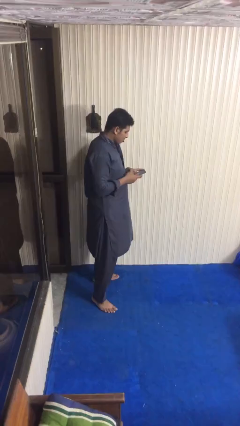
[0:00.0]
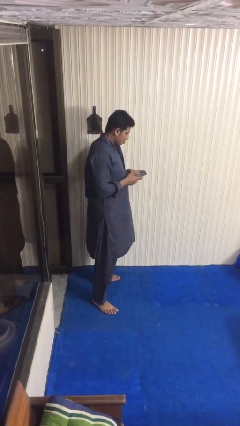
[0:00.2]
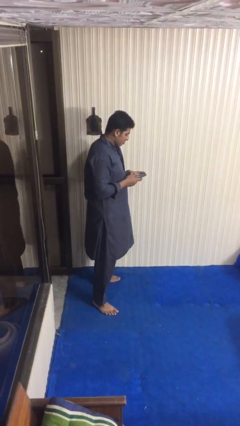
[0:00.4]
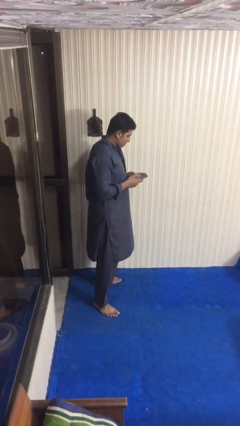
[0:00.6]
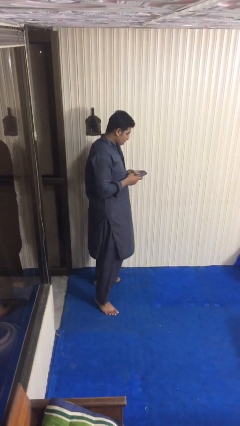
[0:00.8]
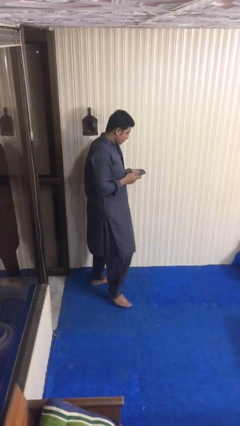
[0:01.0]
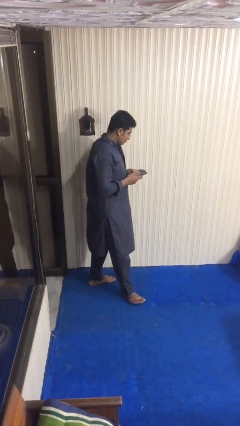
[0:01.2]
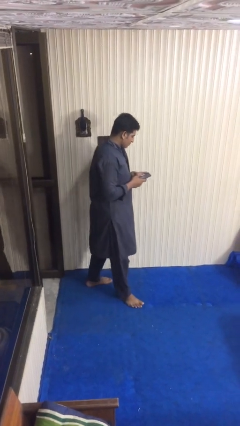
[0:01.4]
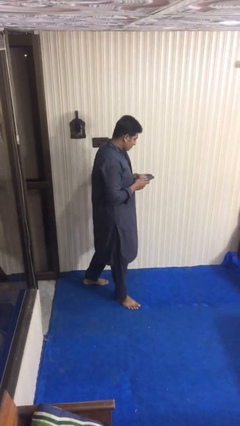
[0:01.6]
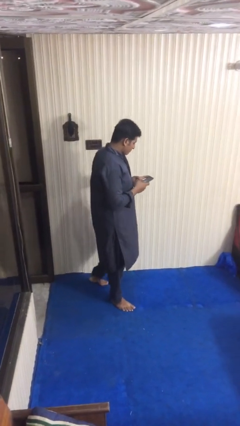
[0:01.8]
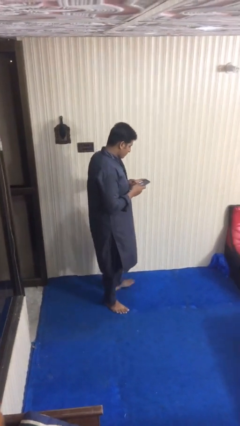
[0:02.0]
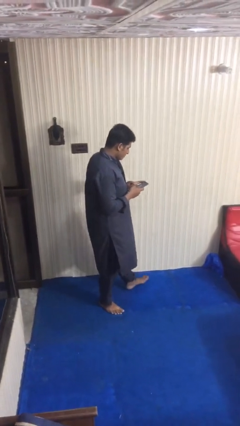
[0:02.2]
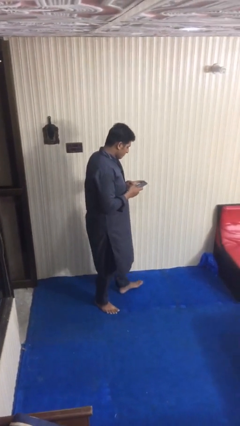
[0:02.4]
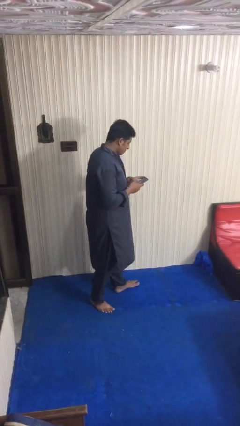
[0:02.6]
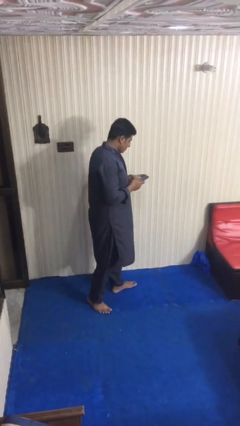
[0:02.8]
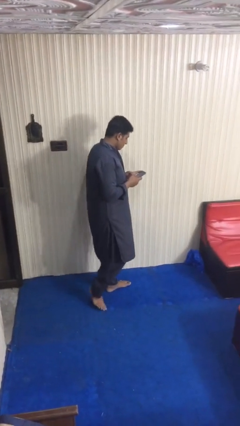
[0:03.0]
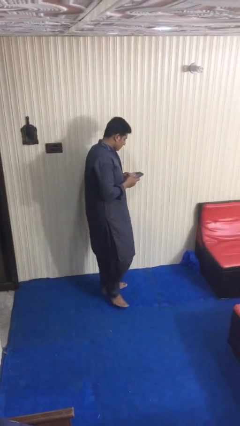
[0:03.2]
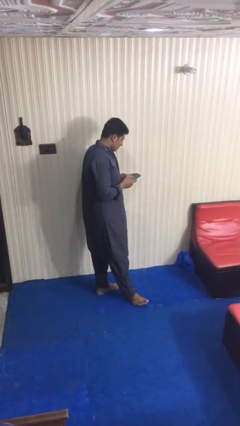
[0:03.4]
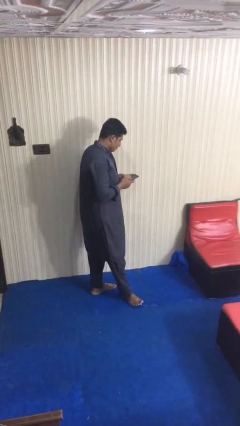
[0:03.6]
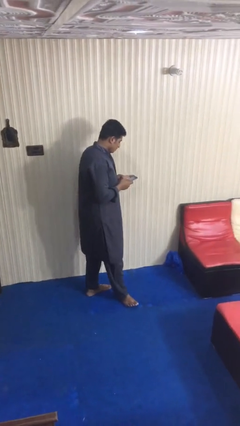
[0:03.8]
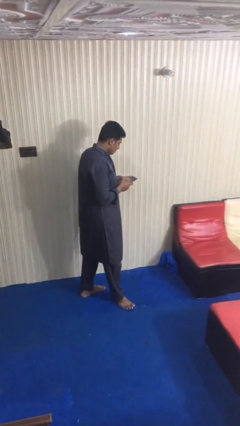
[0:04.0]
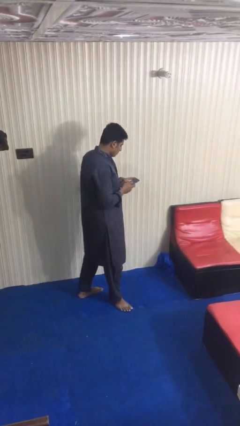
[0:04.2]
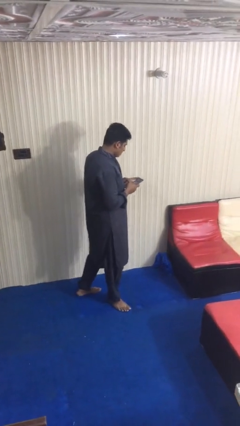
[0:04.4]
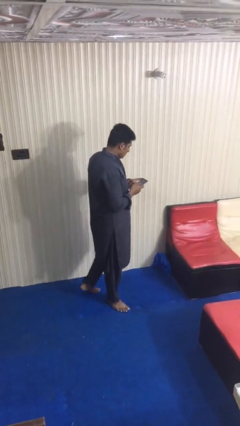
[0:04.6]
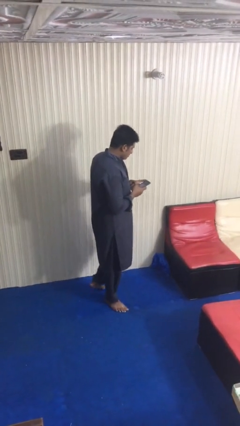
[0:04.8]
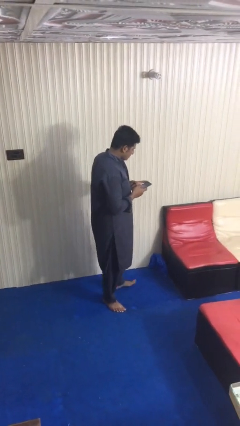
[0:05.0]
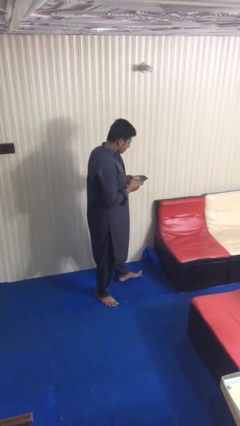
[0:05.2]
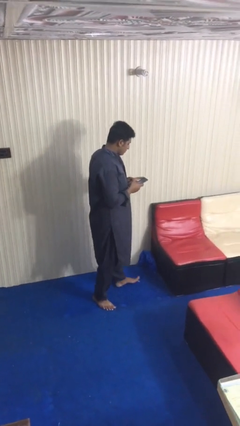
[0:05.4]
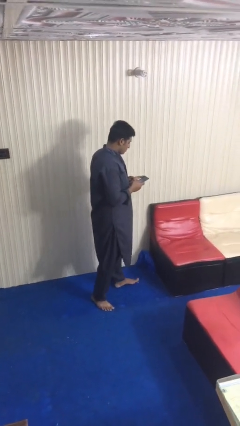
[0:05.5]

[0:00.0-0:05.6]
person texts on phone

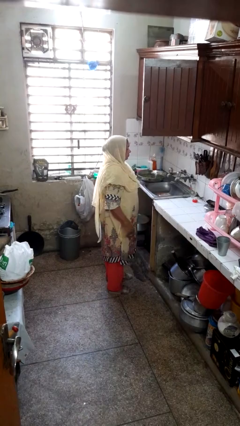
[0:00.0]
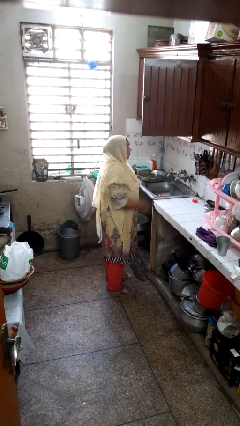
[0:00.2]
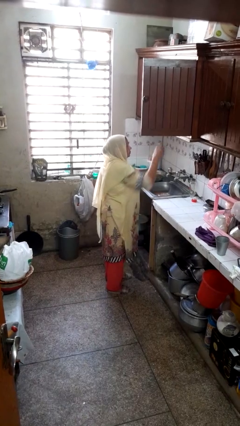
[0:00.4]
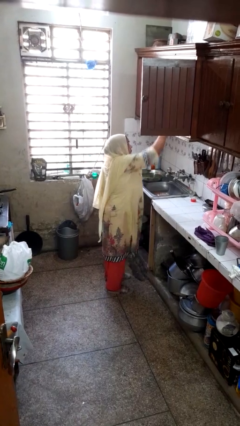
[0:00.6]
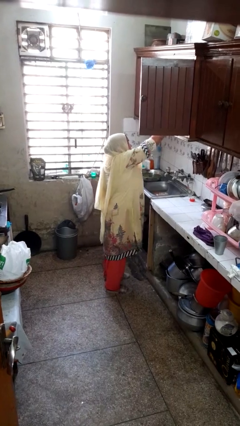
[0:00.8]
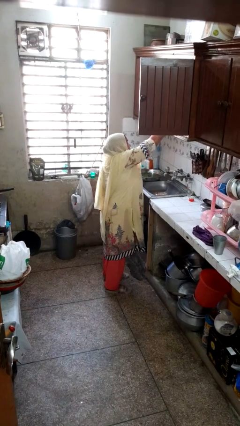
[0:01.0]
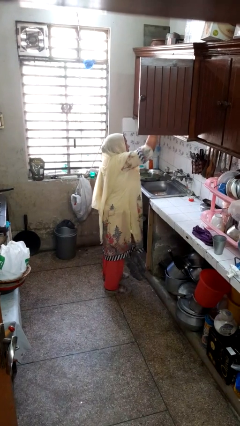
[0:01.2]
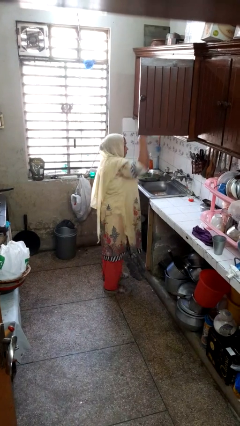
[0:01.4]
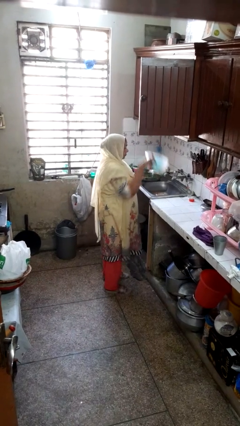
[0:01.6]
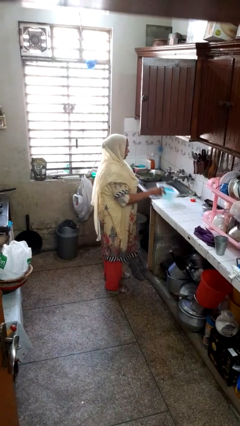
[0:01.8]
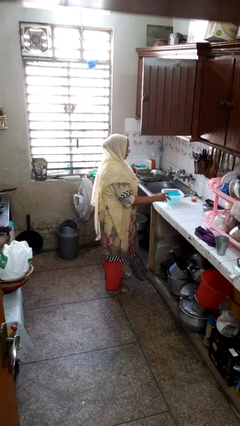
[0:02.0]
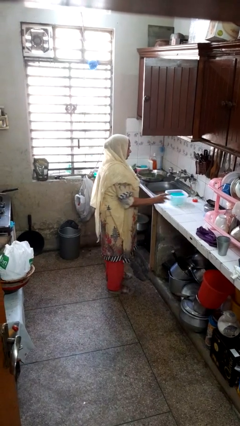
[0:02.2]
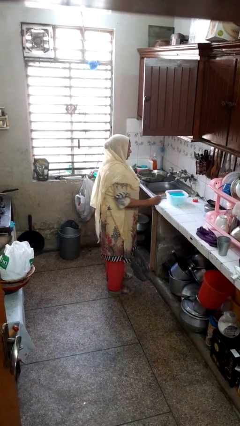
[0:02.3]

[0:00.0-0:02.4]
person takes object from cabinet

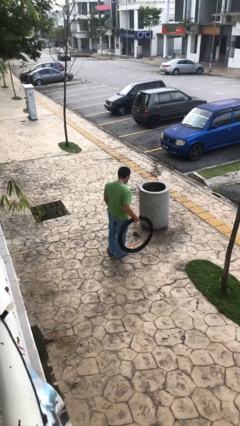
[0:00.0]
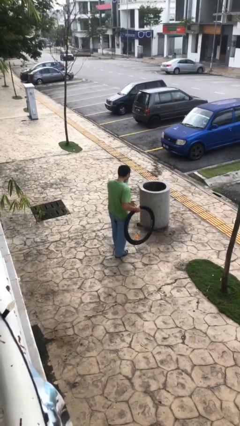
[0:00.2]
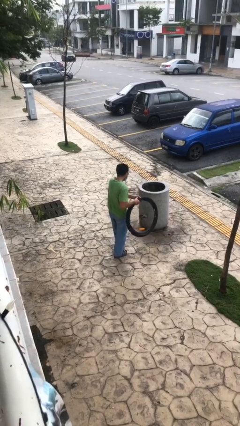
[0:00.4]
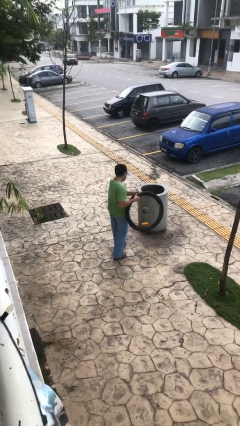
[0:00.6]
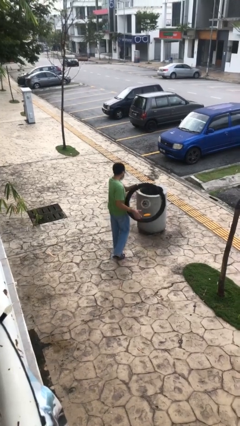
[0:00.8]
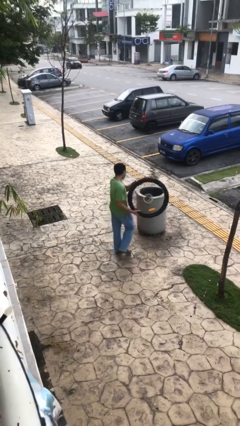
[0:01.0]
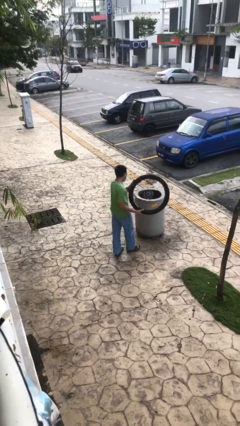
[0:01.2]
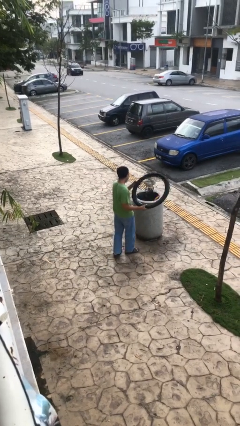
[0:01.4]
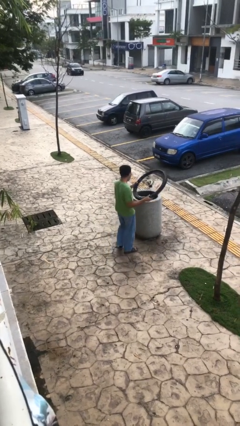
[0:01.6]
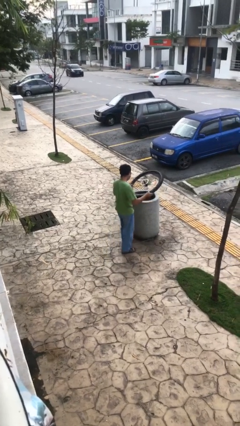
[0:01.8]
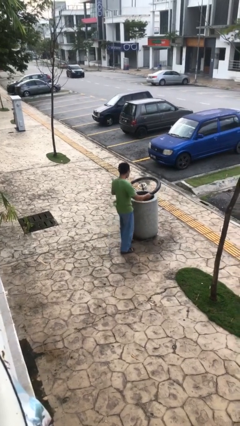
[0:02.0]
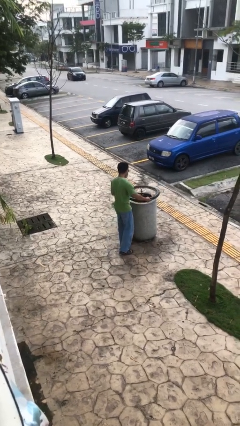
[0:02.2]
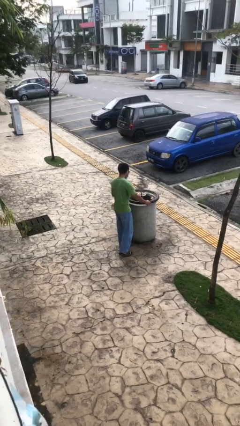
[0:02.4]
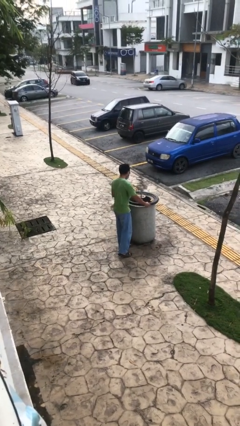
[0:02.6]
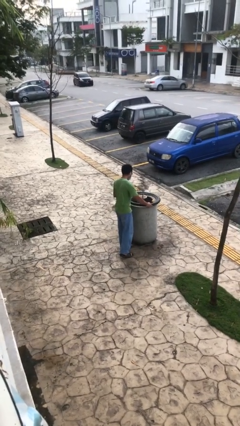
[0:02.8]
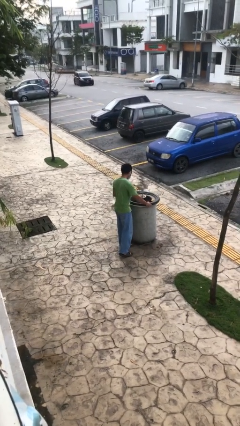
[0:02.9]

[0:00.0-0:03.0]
person puts down object on table

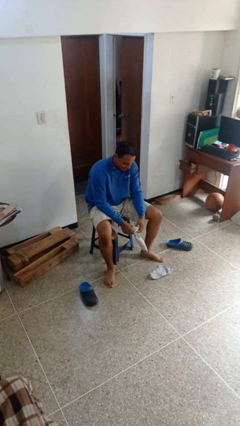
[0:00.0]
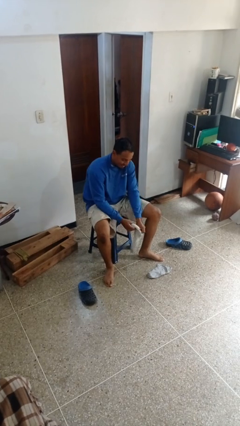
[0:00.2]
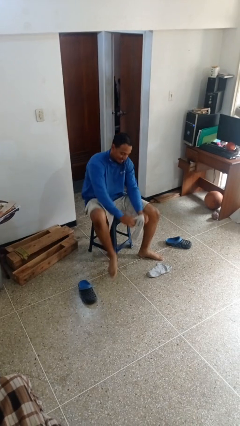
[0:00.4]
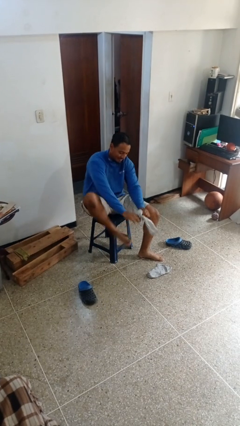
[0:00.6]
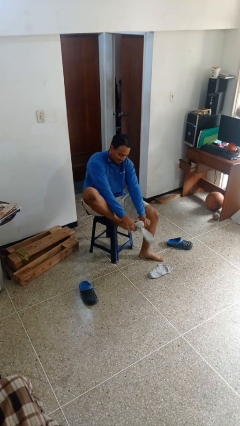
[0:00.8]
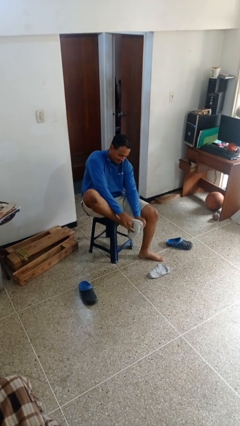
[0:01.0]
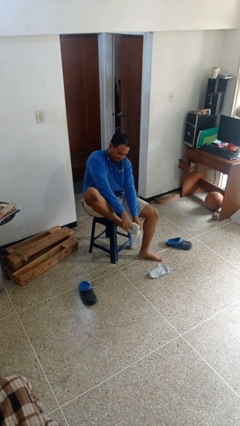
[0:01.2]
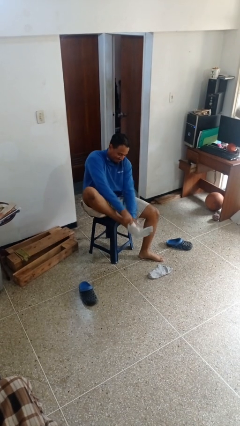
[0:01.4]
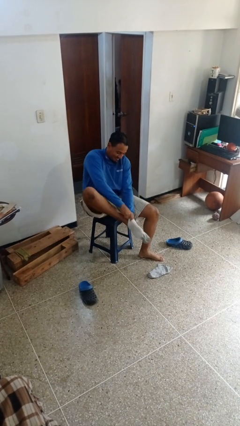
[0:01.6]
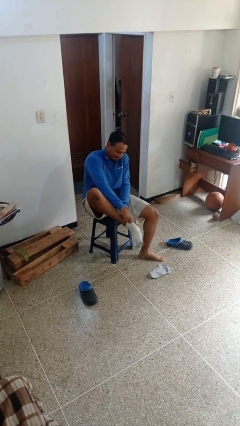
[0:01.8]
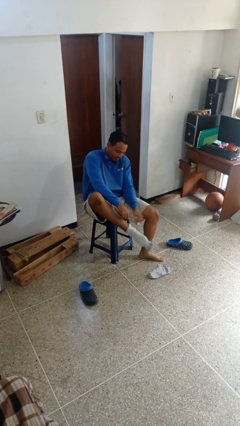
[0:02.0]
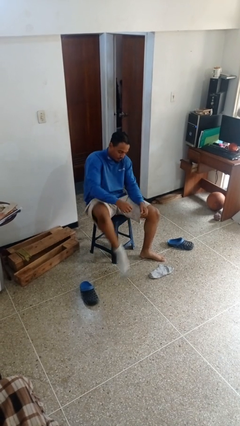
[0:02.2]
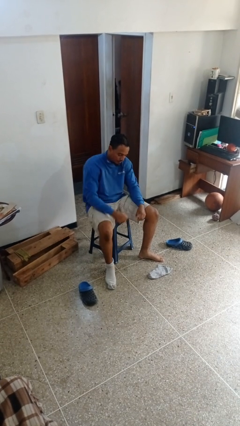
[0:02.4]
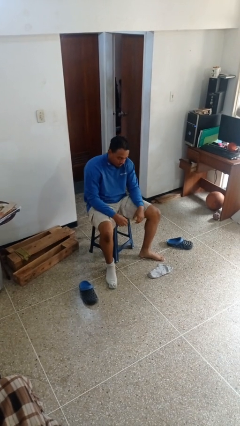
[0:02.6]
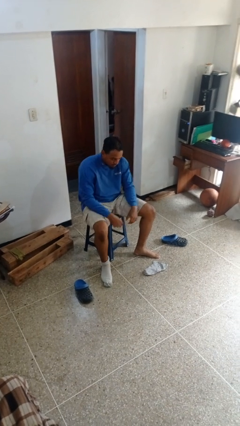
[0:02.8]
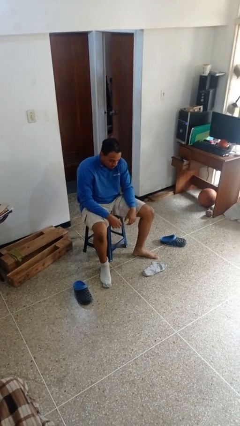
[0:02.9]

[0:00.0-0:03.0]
person puts on socks

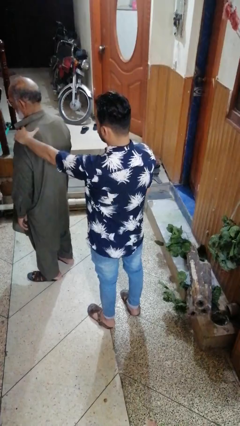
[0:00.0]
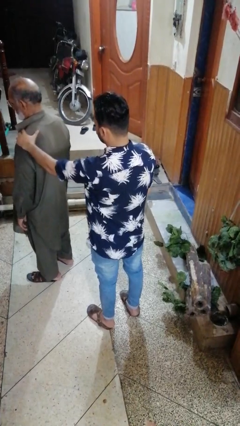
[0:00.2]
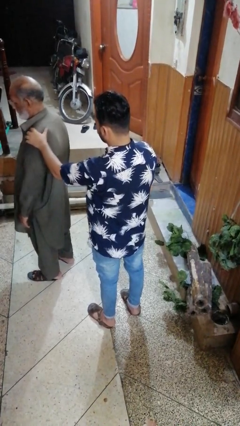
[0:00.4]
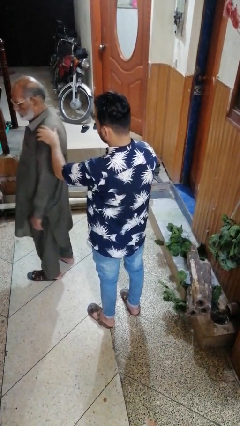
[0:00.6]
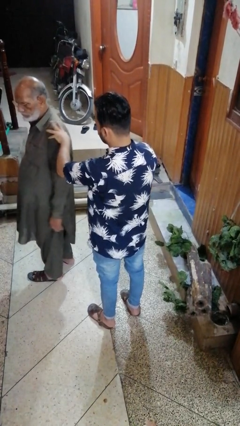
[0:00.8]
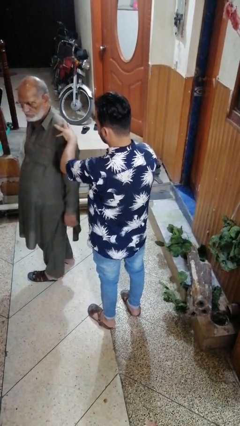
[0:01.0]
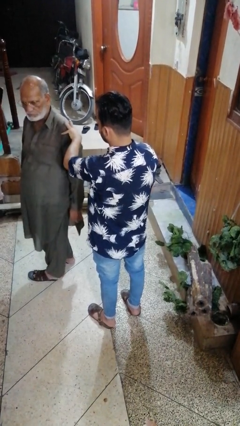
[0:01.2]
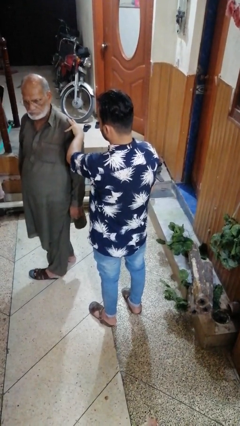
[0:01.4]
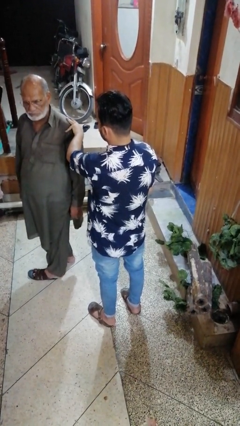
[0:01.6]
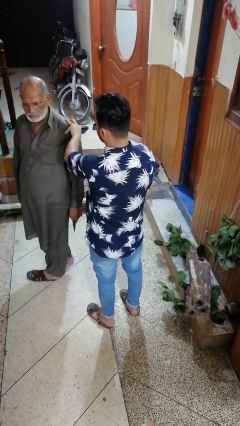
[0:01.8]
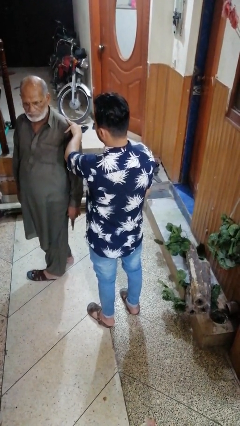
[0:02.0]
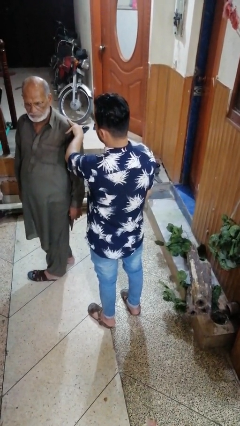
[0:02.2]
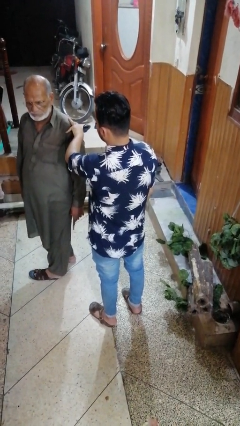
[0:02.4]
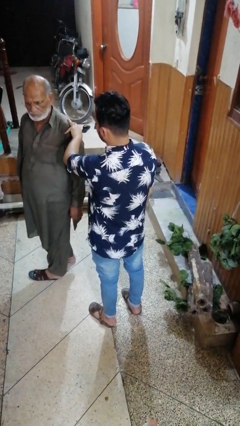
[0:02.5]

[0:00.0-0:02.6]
person spins person around

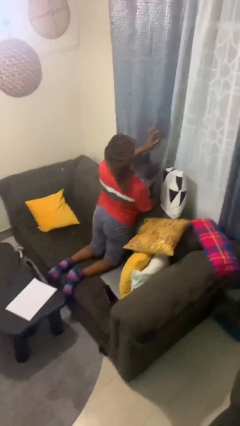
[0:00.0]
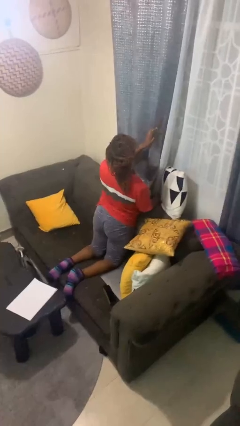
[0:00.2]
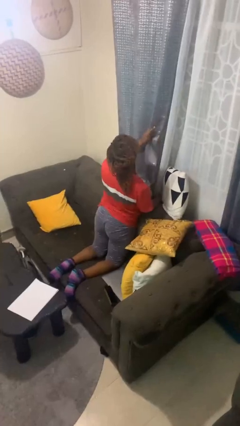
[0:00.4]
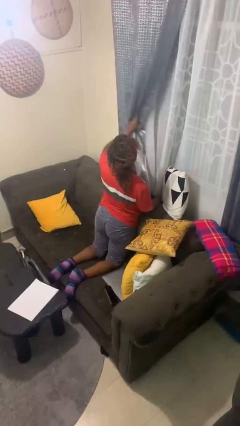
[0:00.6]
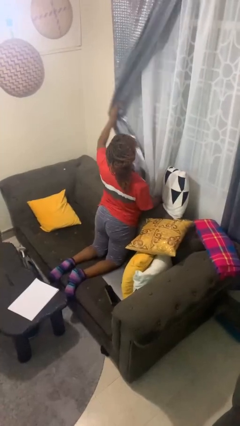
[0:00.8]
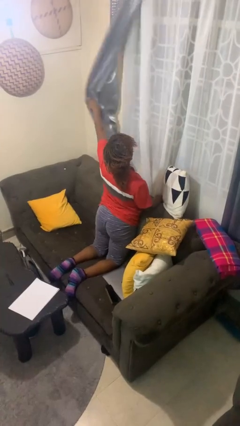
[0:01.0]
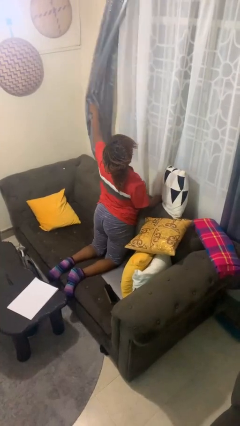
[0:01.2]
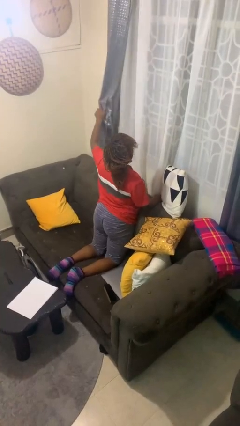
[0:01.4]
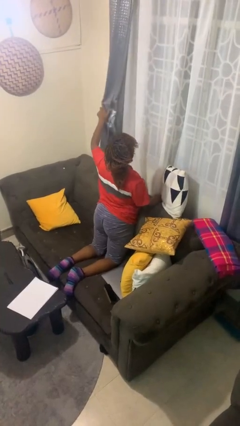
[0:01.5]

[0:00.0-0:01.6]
person opens curtains
